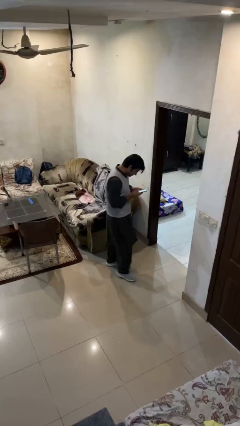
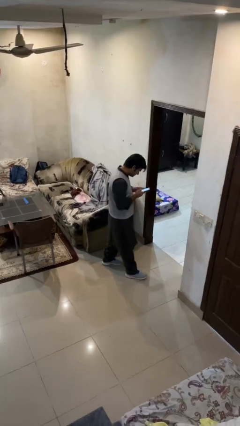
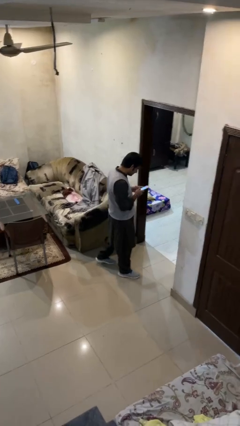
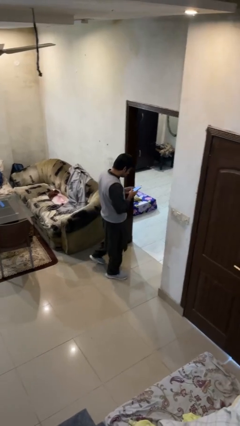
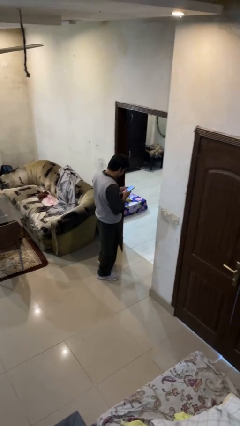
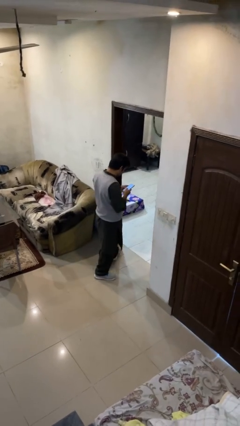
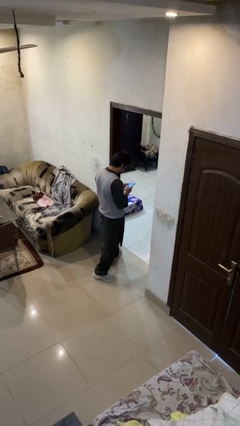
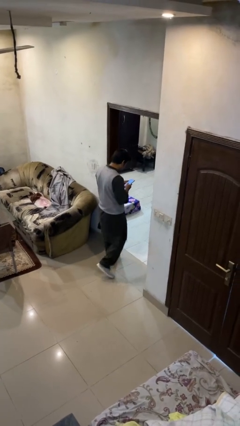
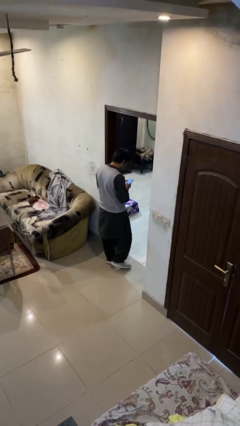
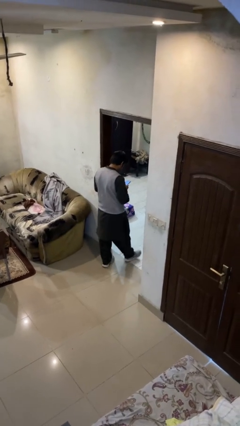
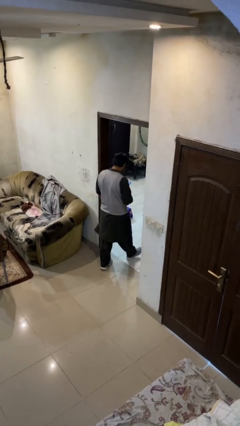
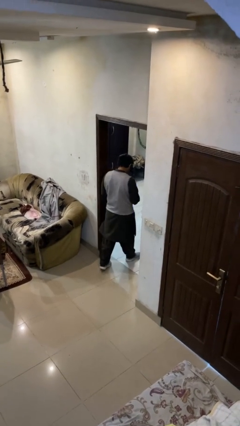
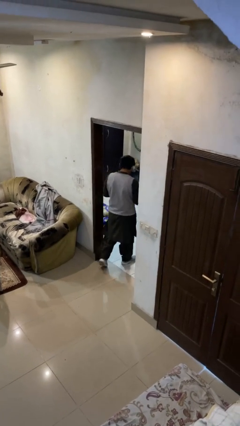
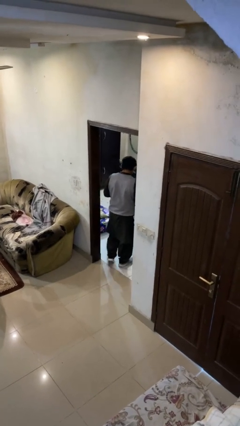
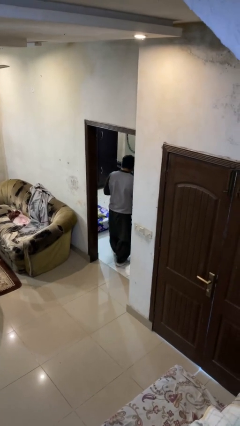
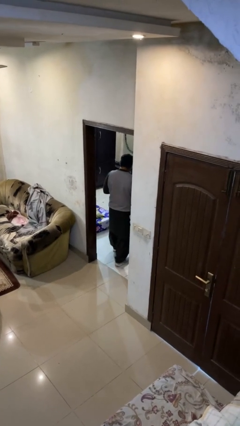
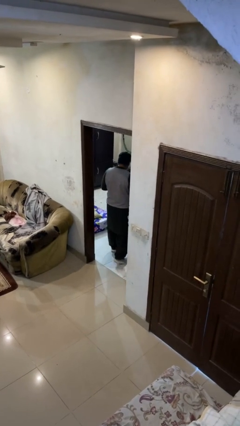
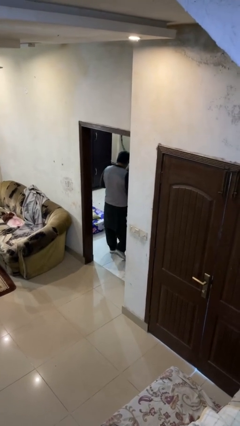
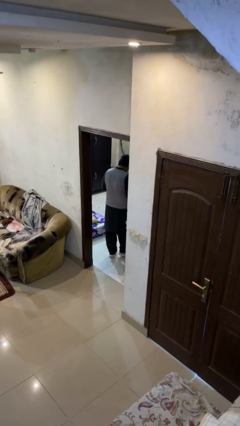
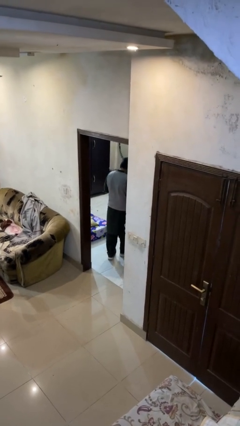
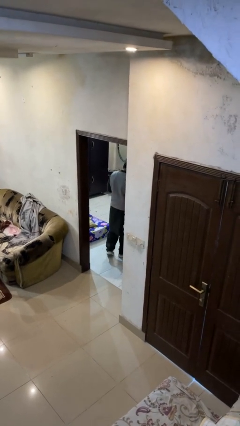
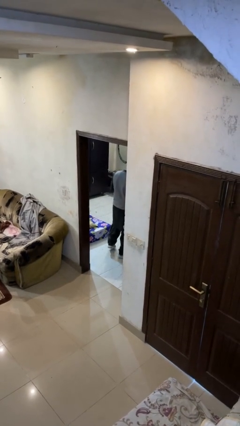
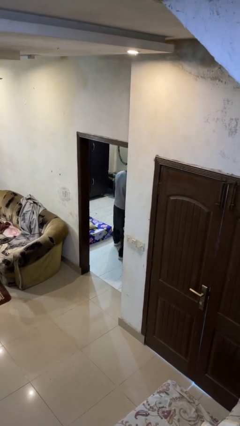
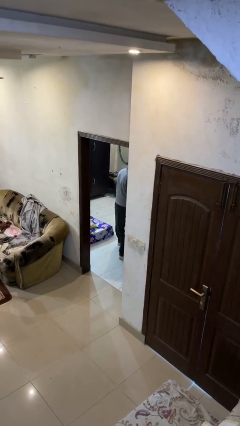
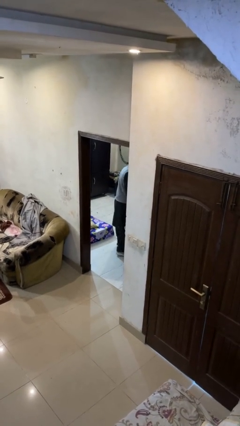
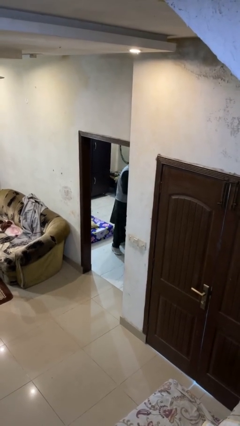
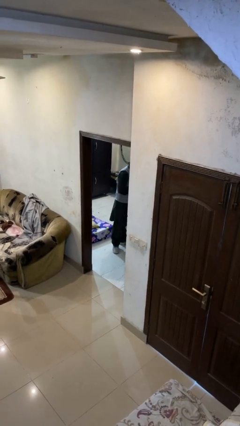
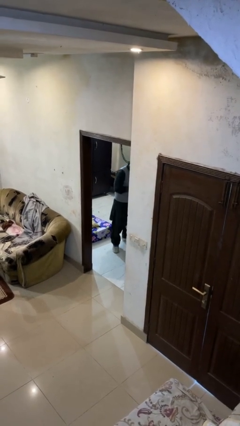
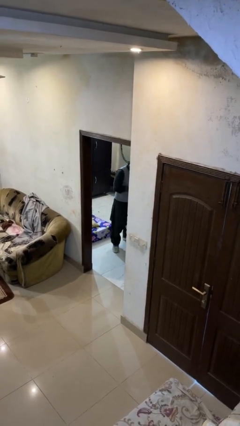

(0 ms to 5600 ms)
person exits scene through structure

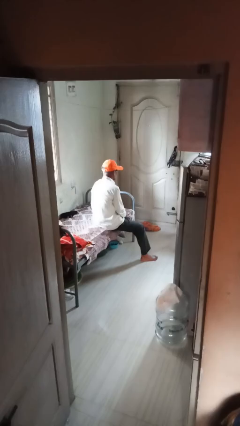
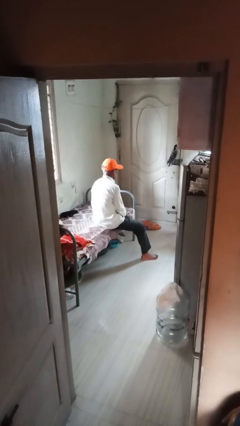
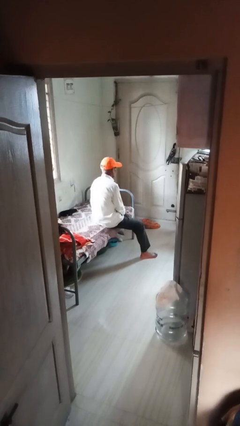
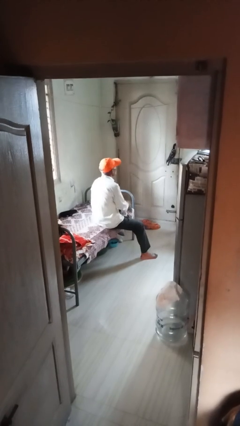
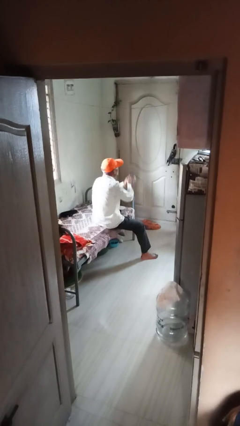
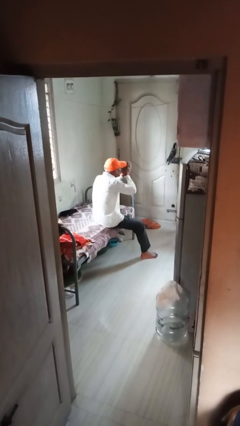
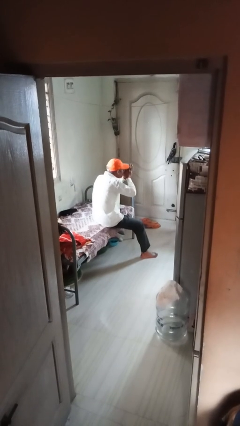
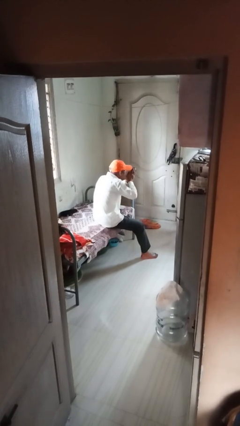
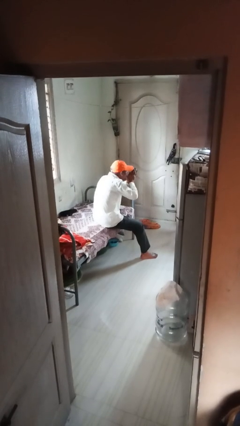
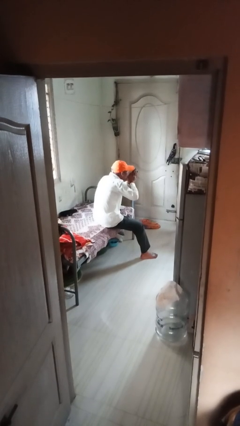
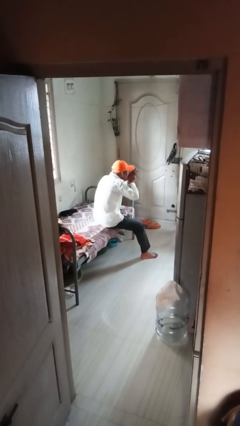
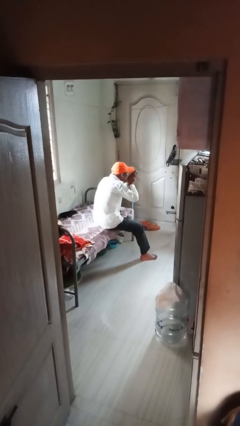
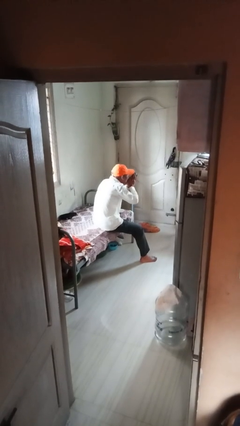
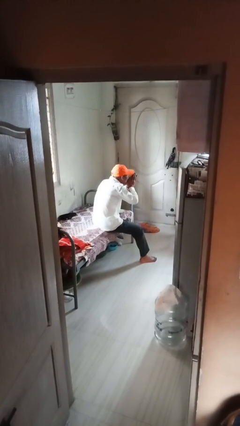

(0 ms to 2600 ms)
person prays

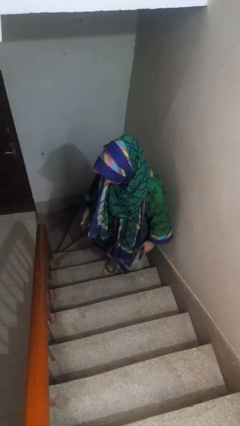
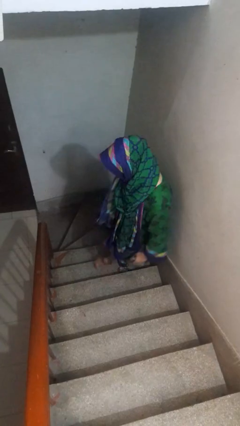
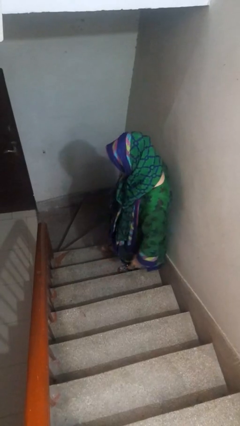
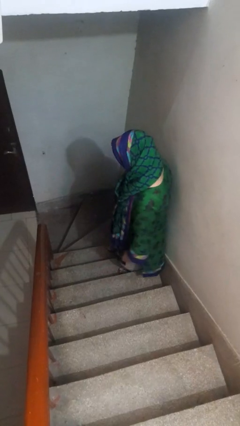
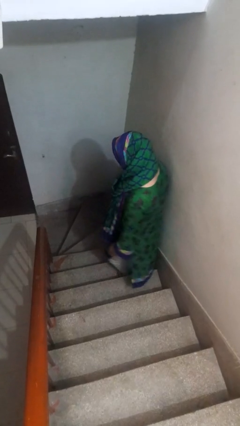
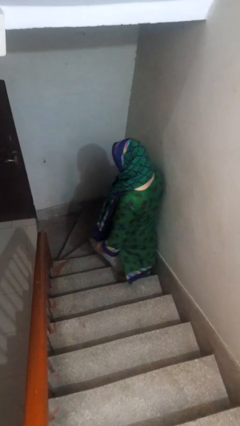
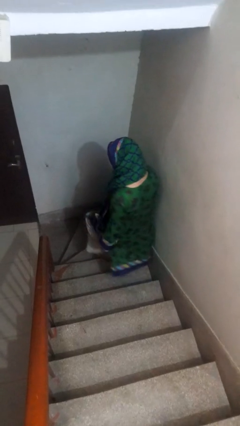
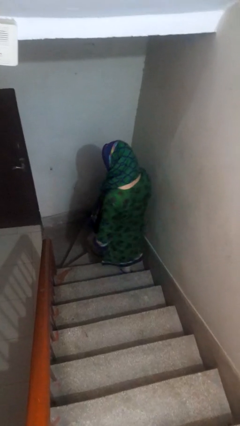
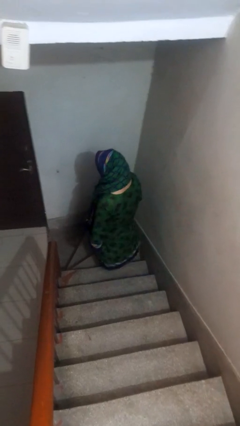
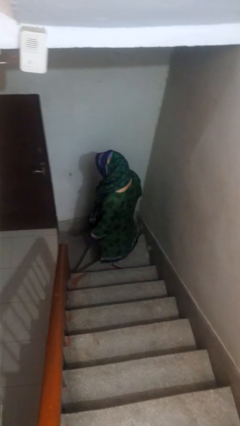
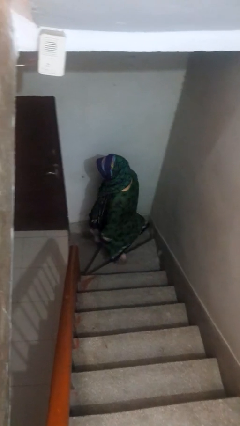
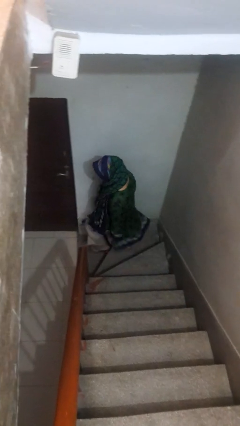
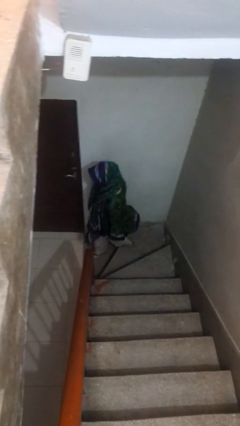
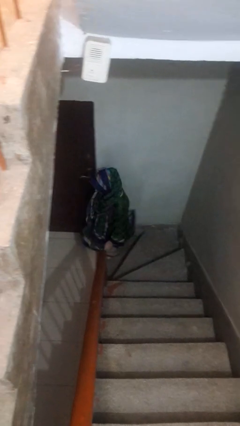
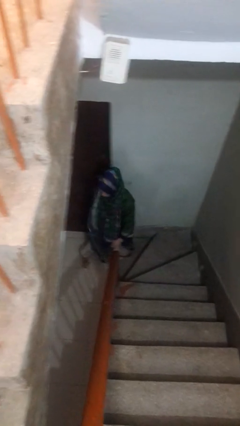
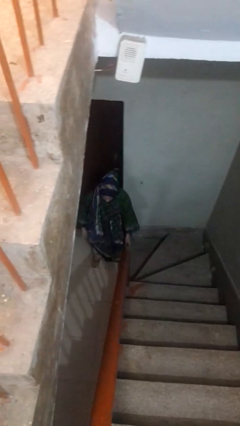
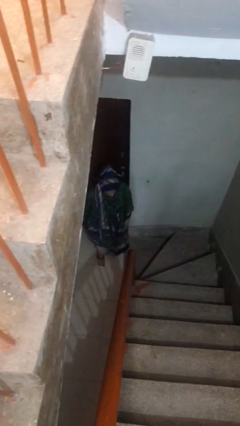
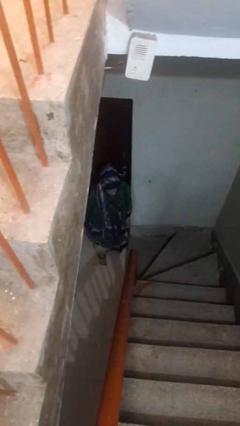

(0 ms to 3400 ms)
person climbs down stairs

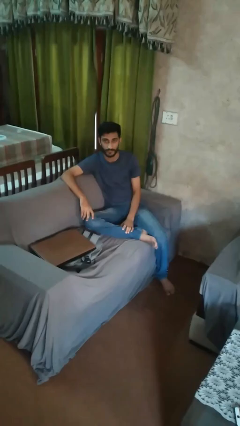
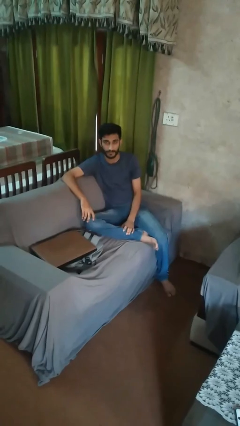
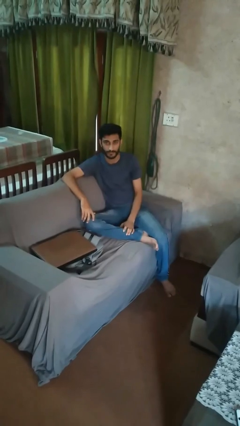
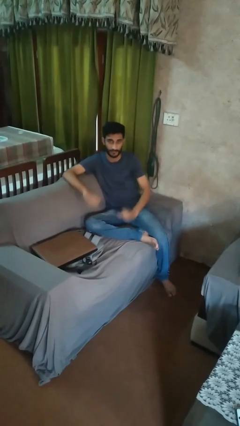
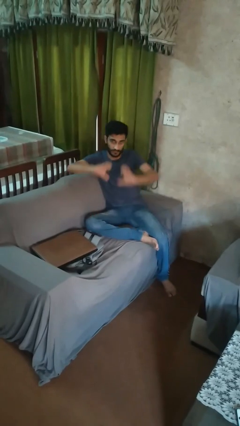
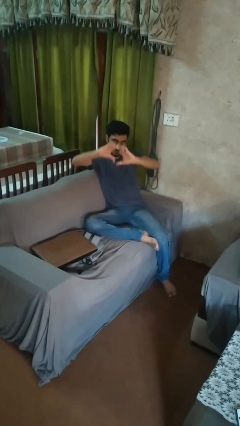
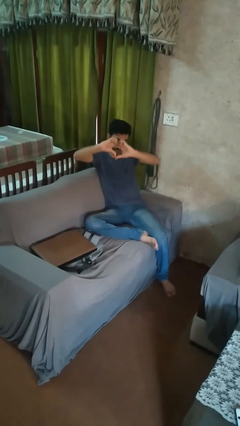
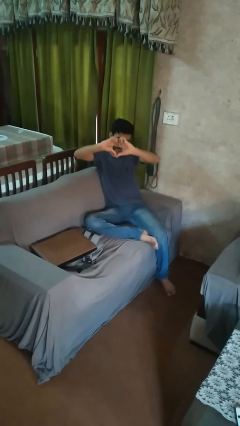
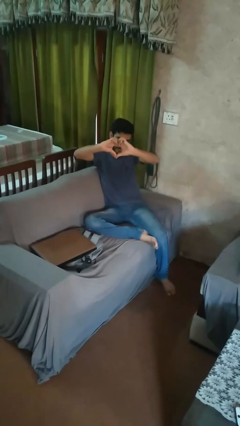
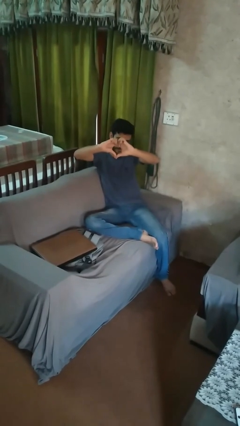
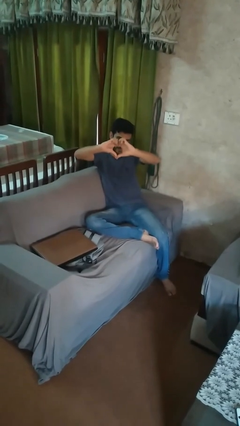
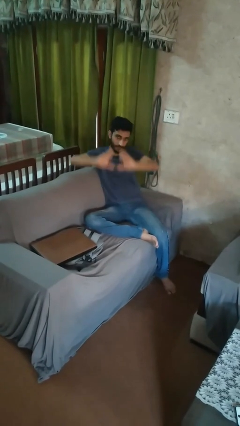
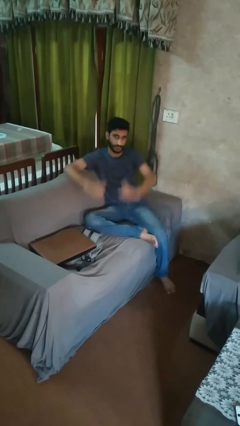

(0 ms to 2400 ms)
person gestures heart

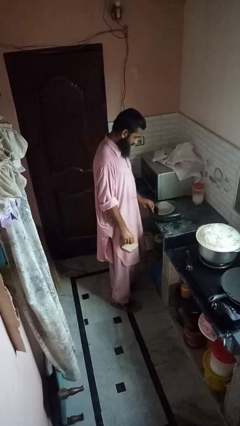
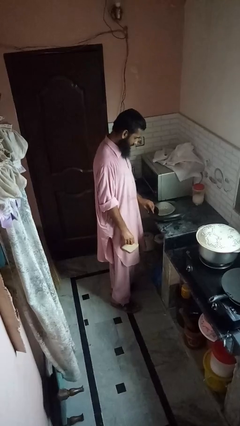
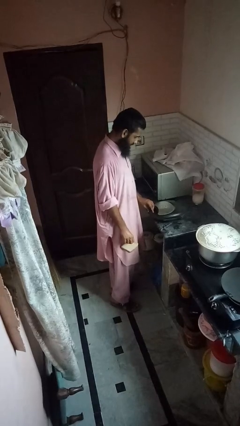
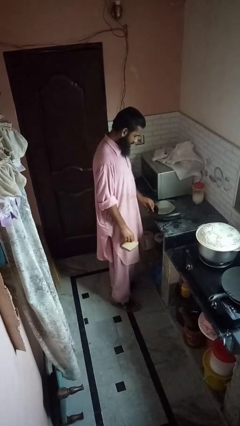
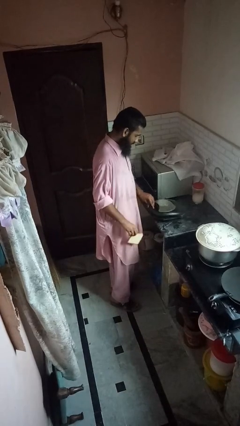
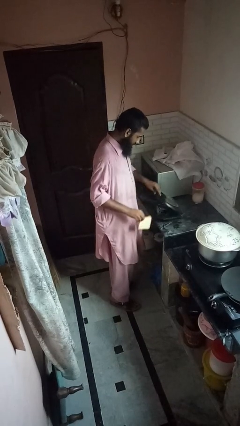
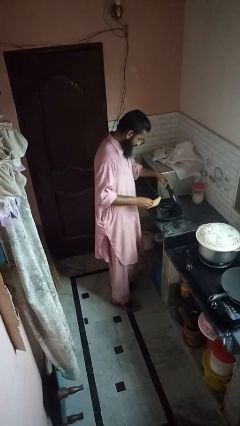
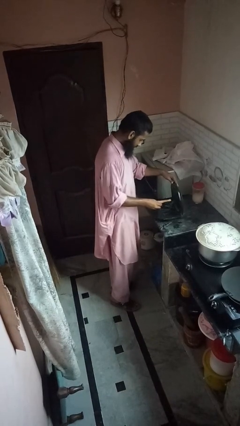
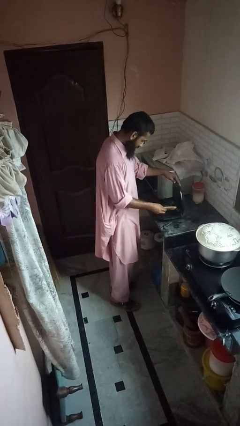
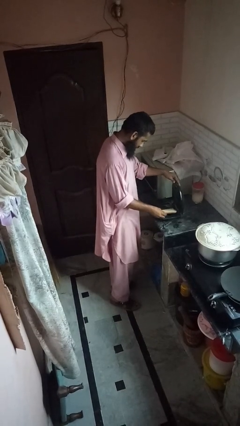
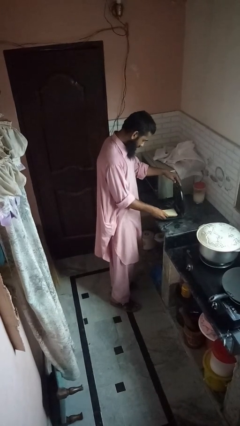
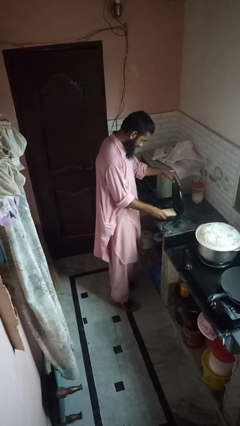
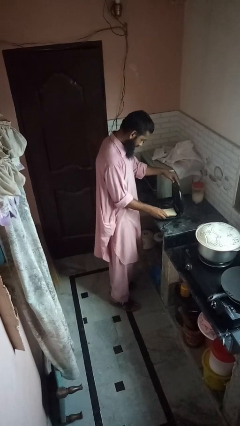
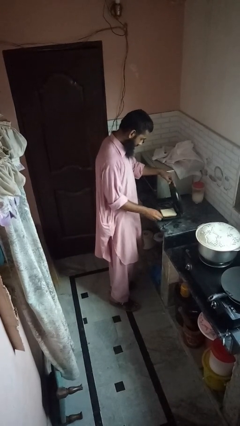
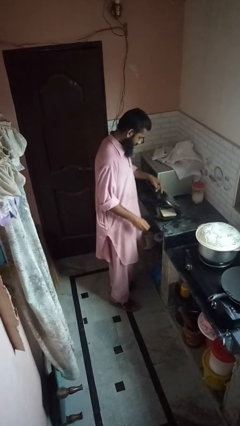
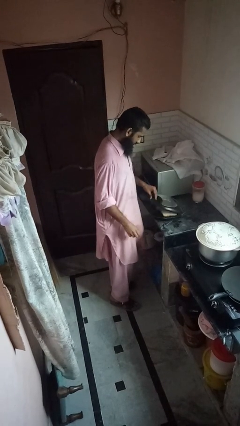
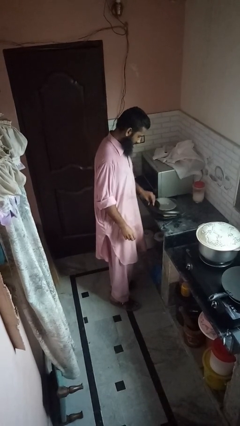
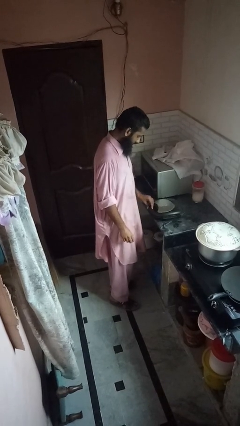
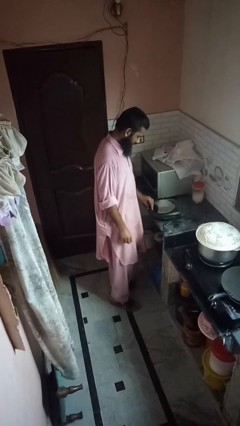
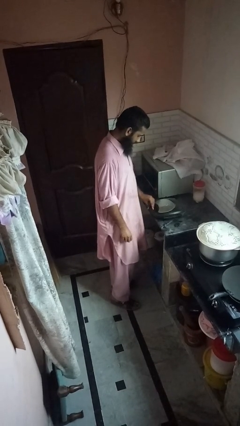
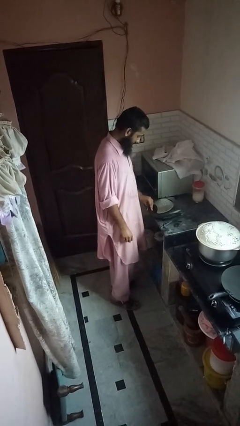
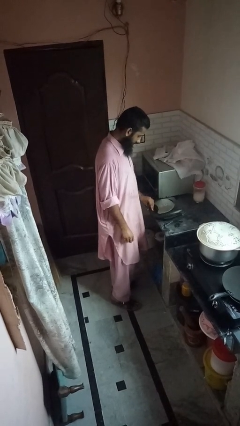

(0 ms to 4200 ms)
person puts object into toaster
